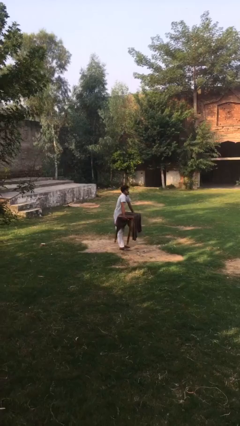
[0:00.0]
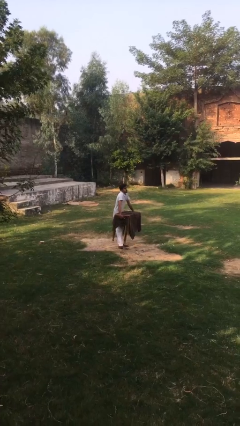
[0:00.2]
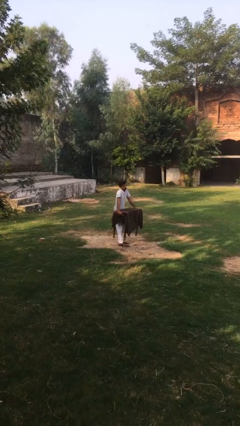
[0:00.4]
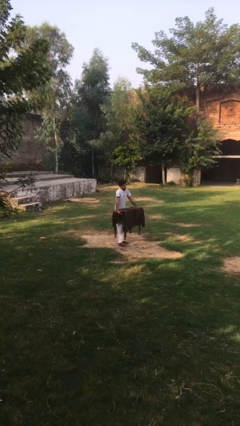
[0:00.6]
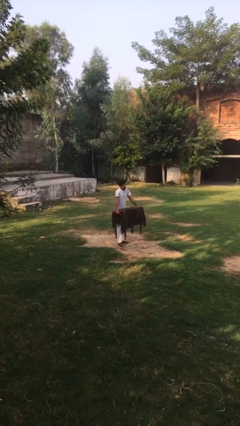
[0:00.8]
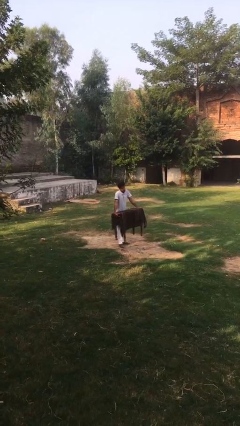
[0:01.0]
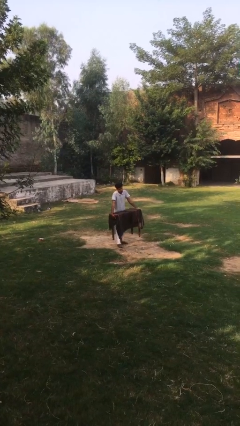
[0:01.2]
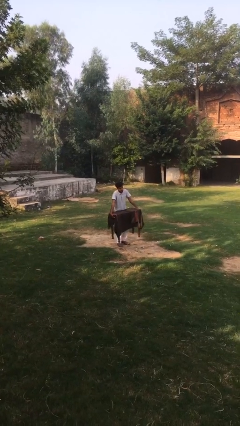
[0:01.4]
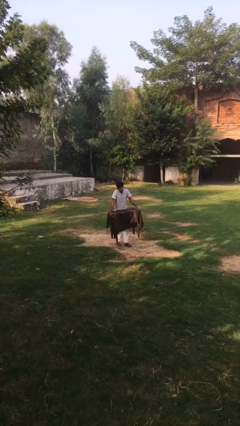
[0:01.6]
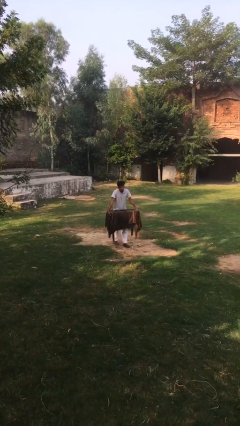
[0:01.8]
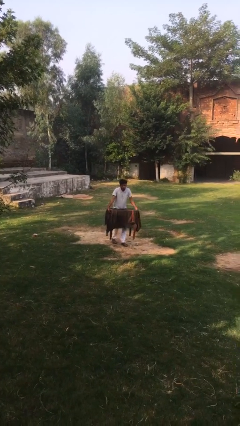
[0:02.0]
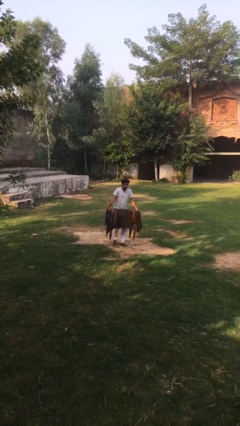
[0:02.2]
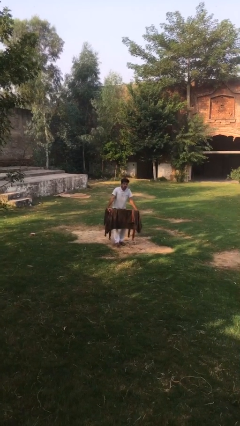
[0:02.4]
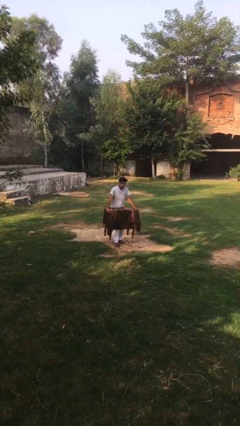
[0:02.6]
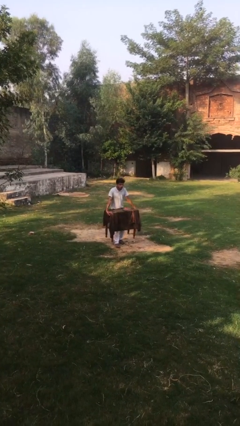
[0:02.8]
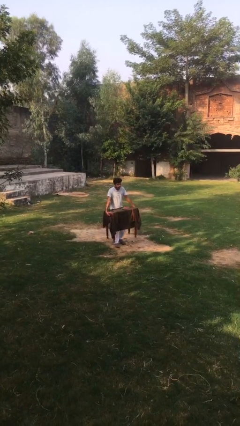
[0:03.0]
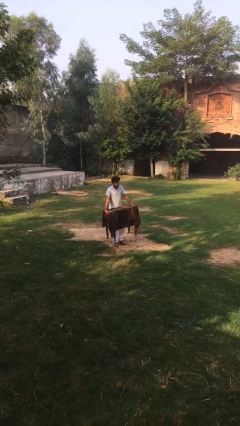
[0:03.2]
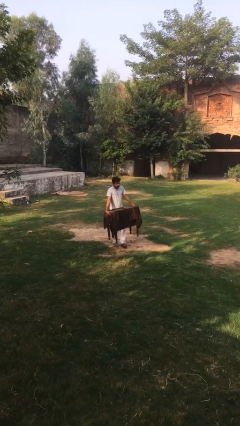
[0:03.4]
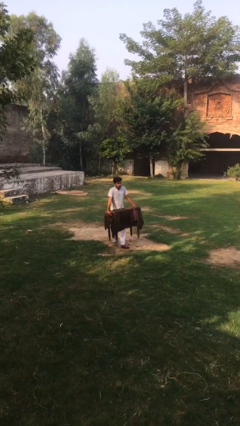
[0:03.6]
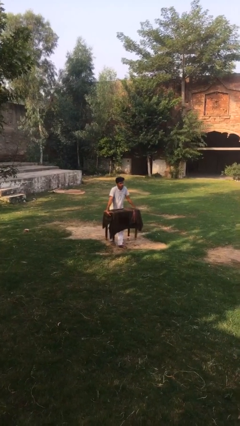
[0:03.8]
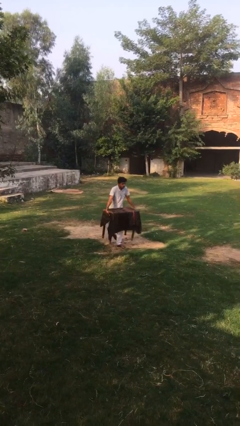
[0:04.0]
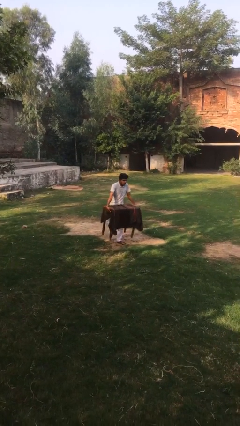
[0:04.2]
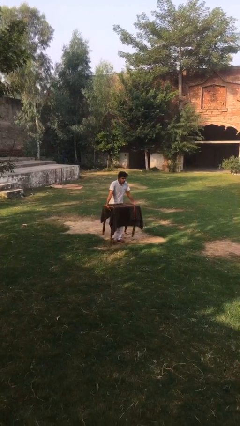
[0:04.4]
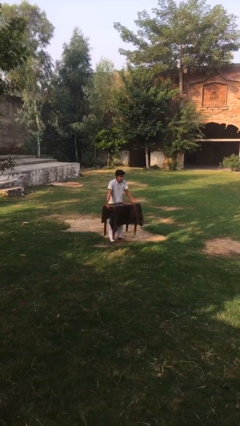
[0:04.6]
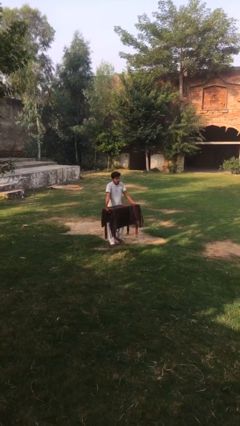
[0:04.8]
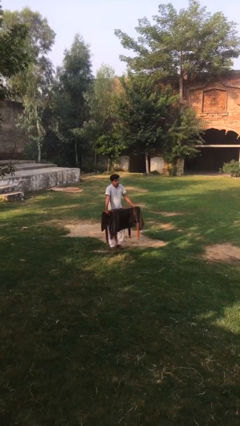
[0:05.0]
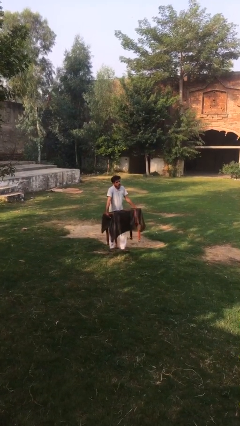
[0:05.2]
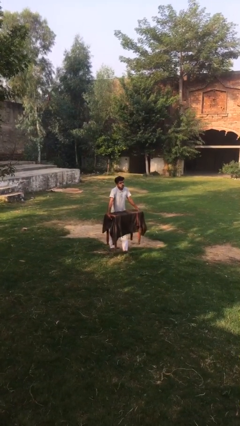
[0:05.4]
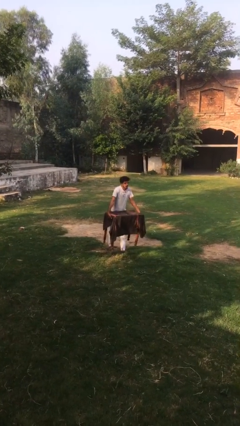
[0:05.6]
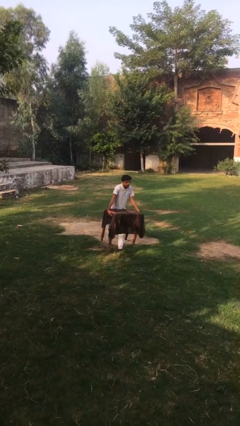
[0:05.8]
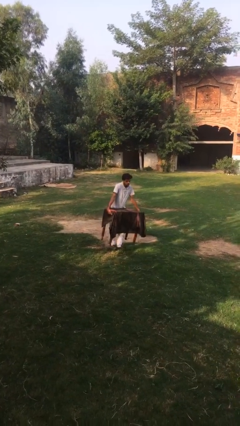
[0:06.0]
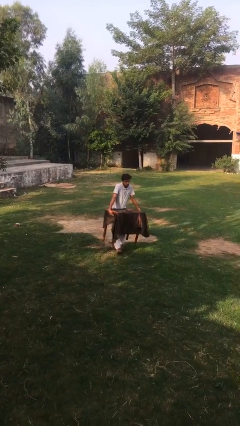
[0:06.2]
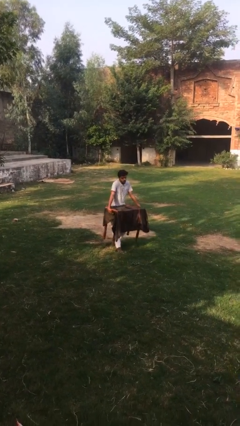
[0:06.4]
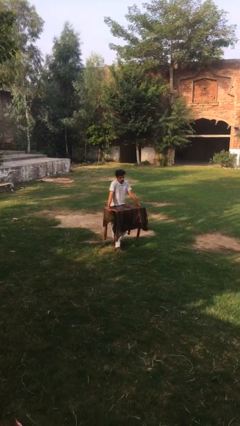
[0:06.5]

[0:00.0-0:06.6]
person carries heavy object

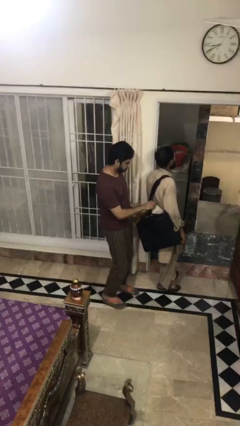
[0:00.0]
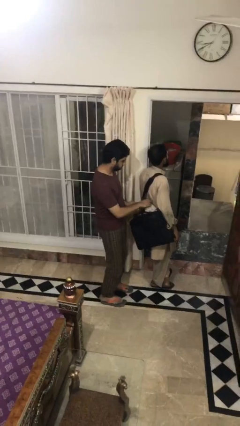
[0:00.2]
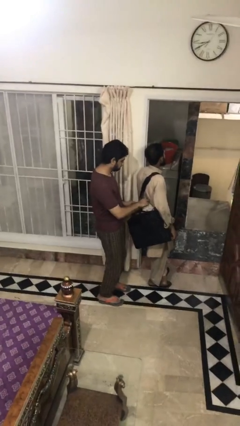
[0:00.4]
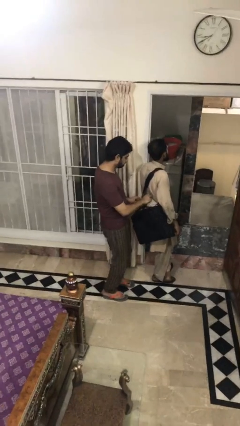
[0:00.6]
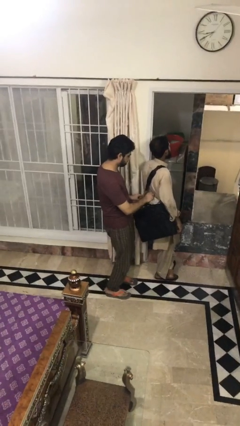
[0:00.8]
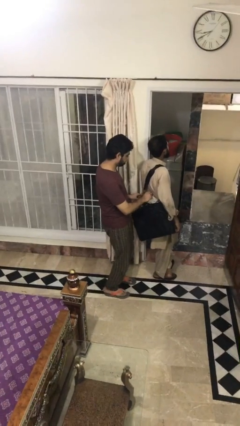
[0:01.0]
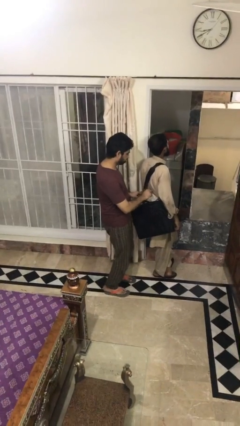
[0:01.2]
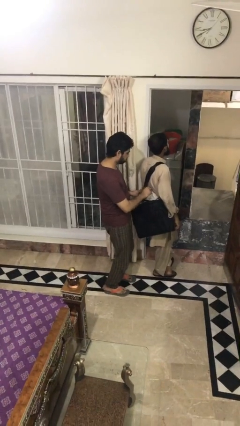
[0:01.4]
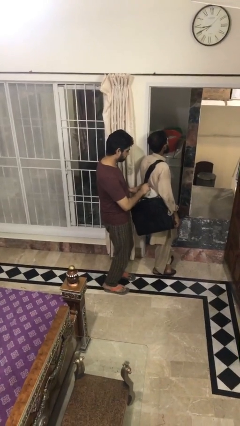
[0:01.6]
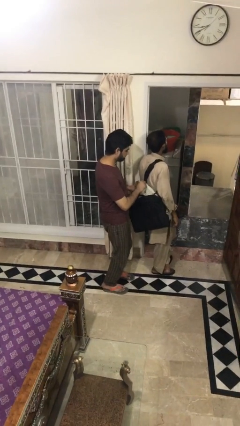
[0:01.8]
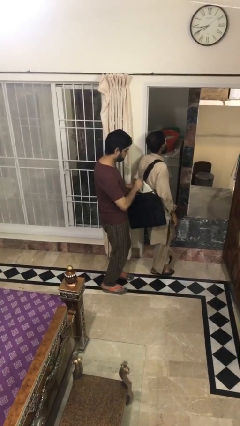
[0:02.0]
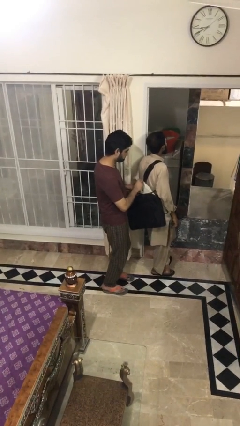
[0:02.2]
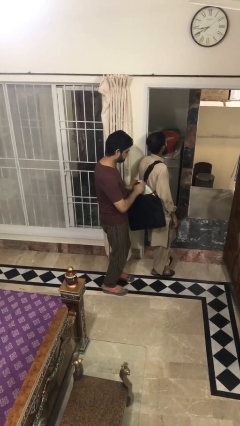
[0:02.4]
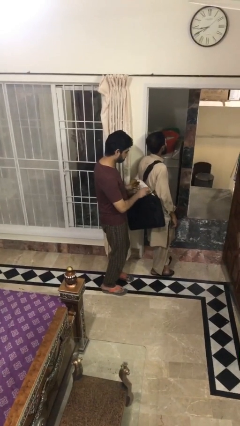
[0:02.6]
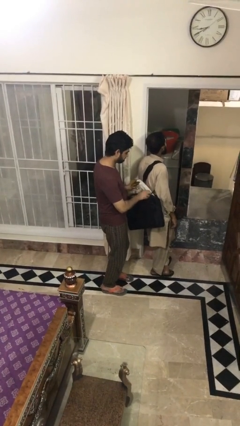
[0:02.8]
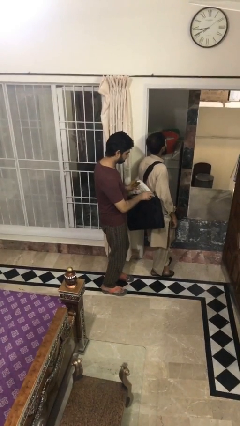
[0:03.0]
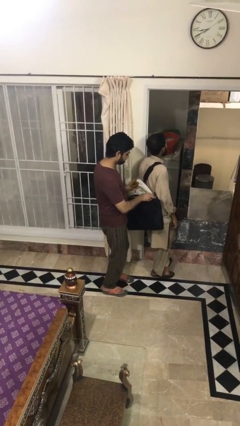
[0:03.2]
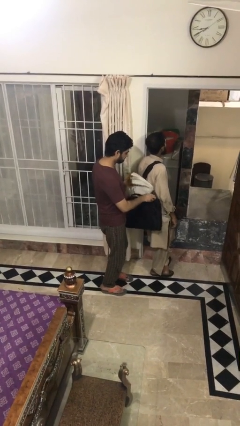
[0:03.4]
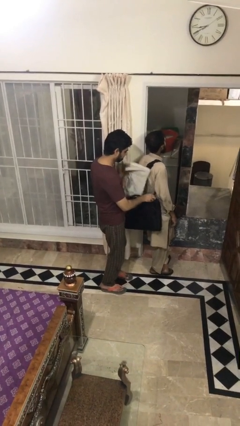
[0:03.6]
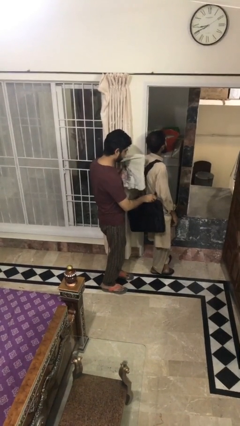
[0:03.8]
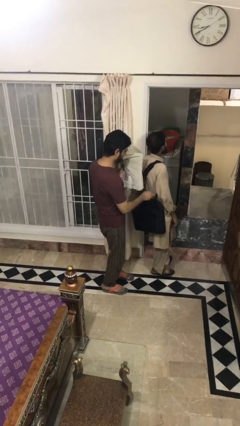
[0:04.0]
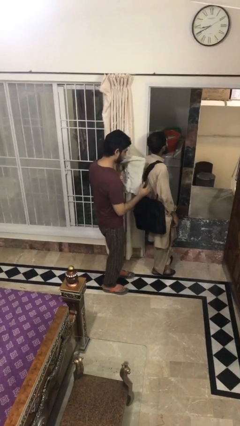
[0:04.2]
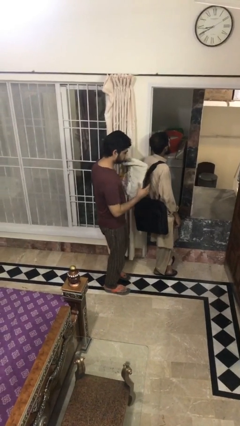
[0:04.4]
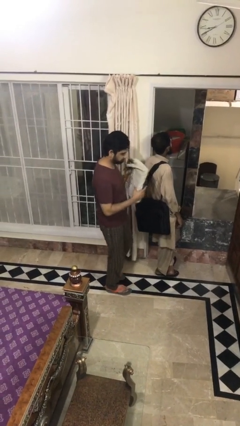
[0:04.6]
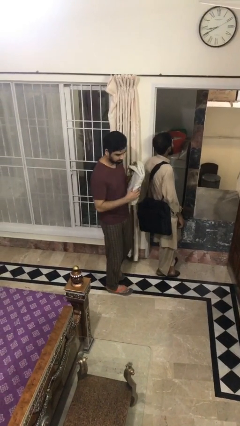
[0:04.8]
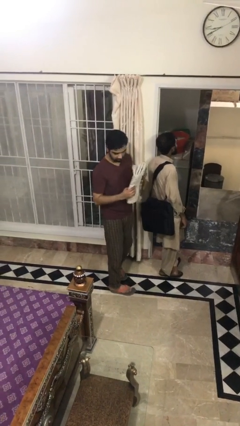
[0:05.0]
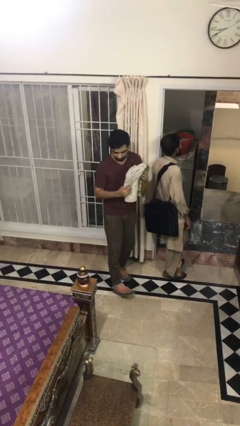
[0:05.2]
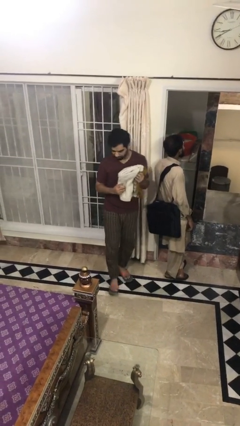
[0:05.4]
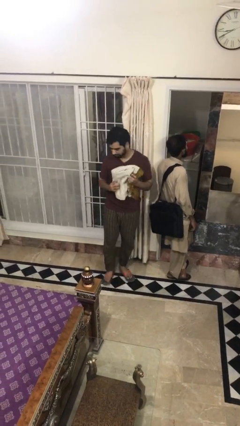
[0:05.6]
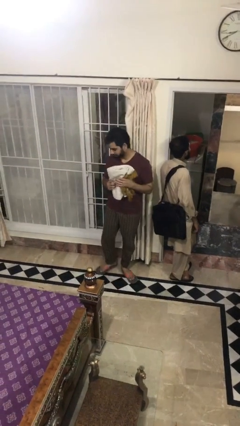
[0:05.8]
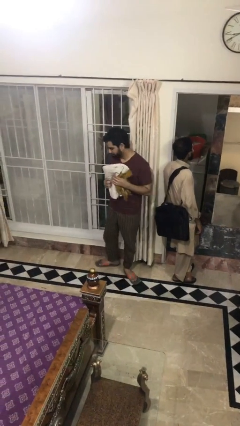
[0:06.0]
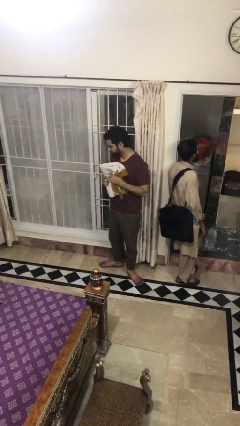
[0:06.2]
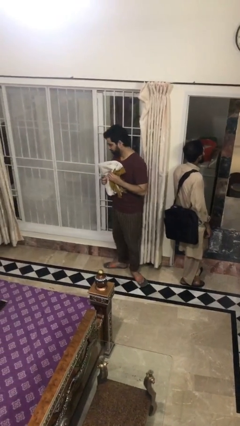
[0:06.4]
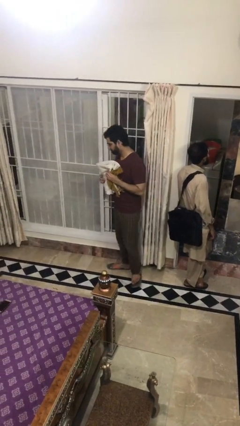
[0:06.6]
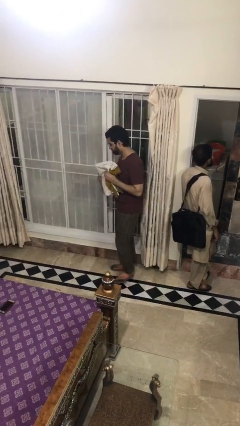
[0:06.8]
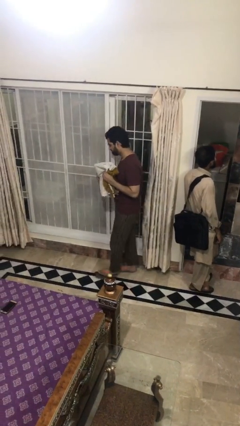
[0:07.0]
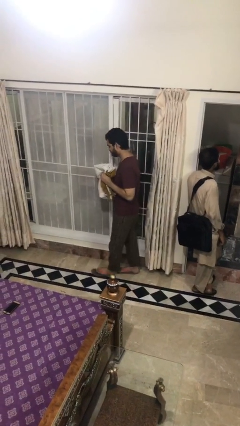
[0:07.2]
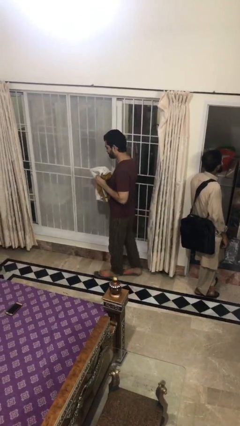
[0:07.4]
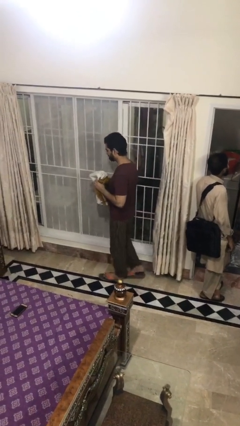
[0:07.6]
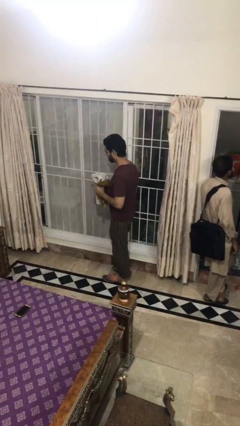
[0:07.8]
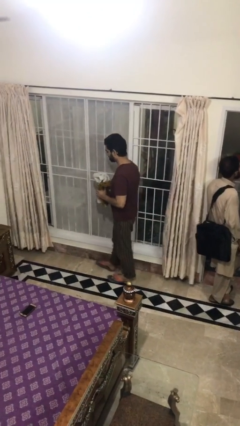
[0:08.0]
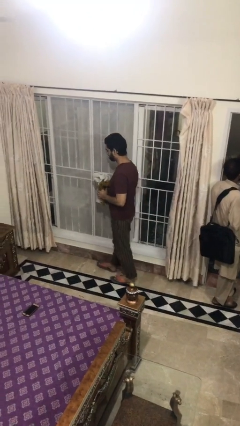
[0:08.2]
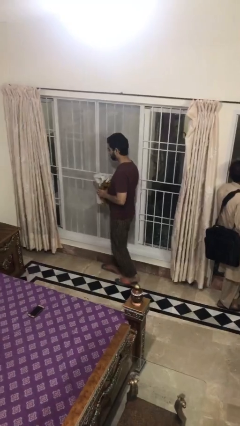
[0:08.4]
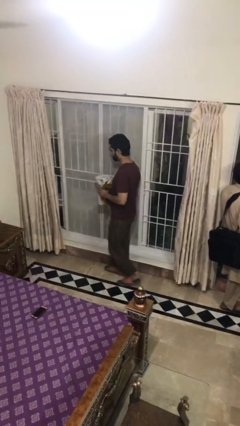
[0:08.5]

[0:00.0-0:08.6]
person steals object from person

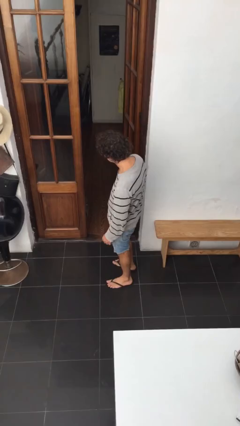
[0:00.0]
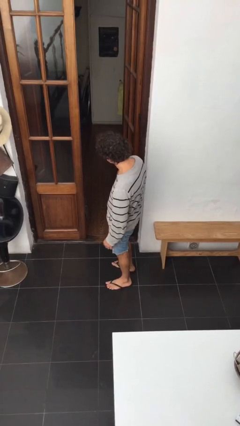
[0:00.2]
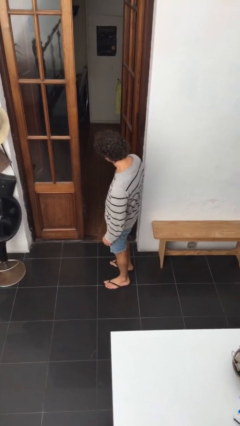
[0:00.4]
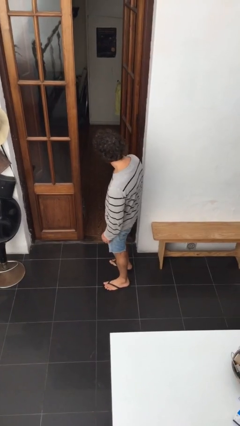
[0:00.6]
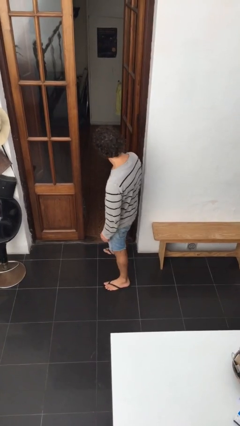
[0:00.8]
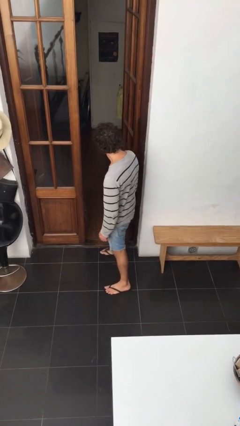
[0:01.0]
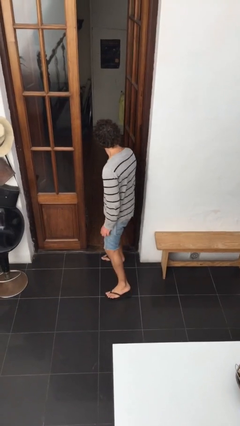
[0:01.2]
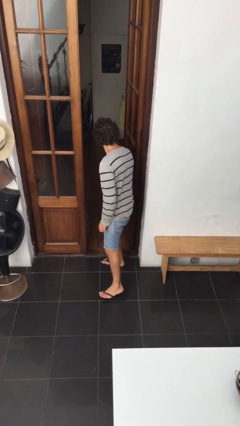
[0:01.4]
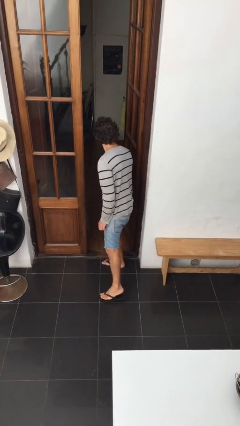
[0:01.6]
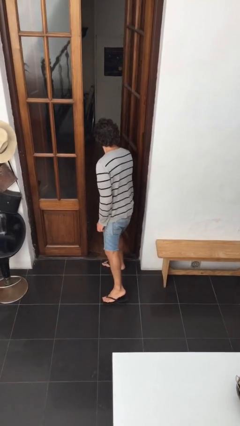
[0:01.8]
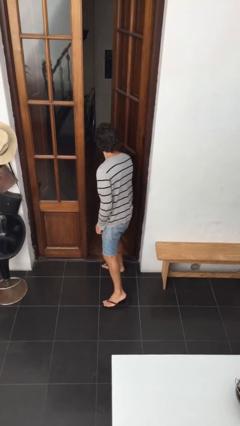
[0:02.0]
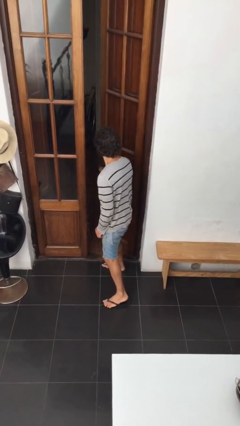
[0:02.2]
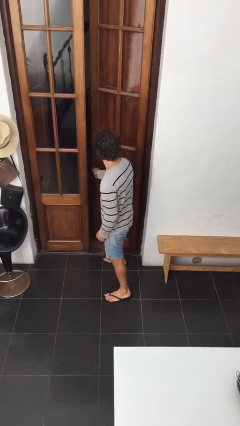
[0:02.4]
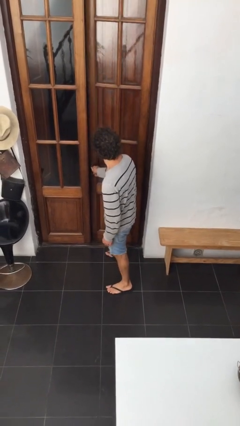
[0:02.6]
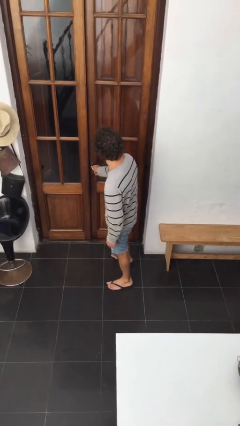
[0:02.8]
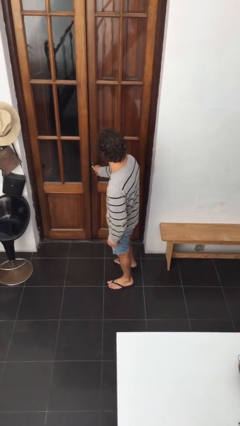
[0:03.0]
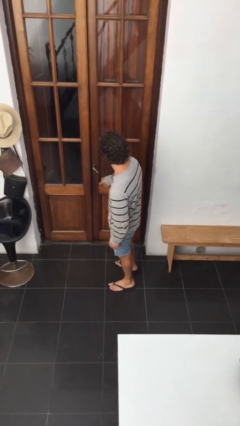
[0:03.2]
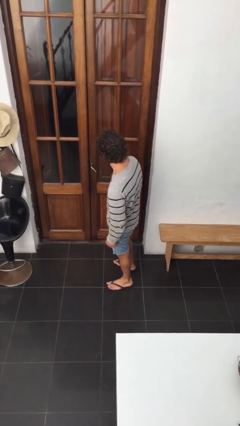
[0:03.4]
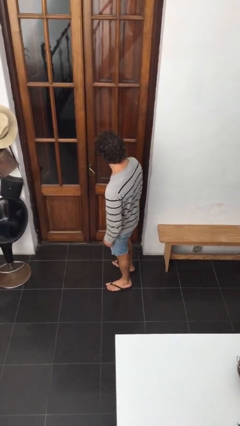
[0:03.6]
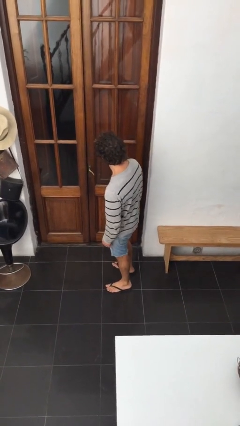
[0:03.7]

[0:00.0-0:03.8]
person closes facility door
